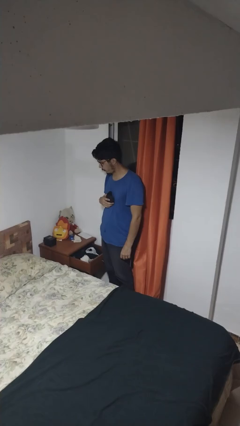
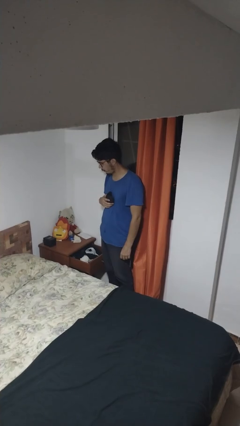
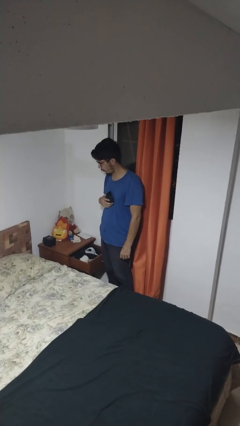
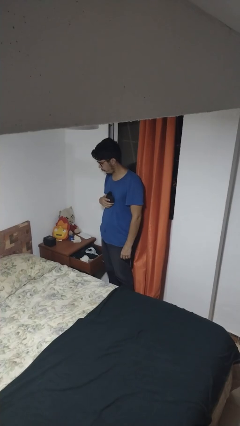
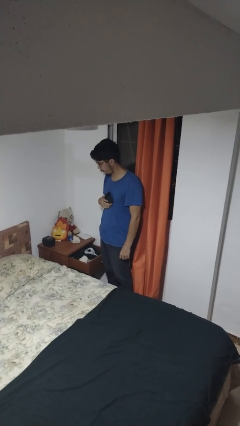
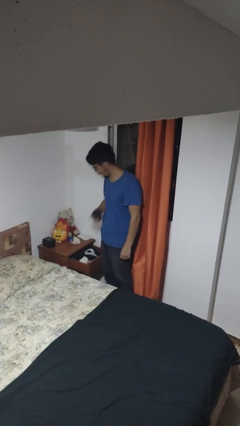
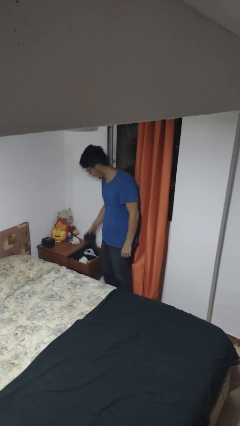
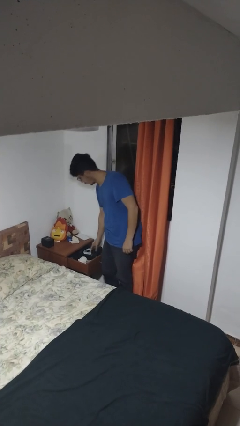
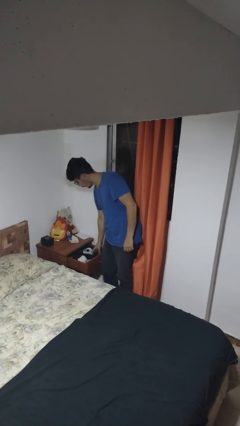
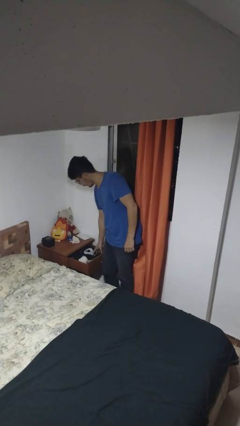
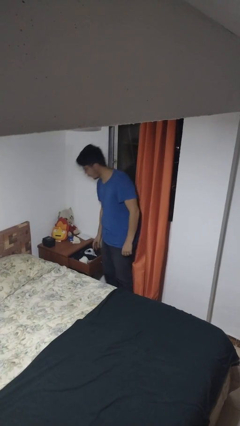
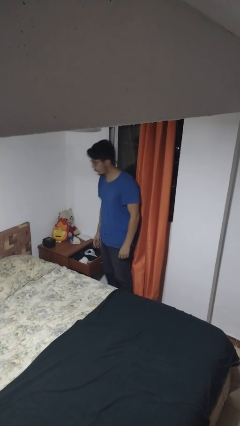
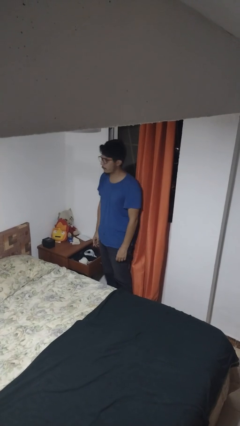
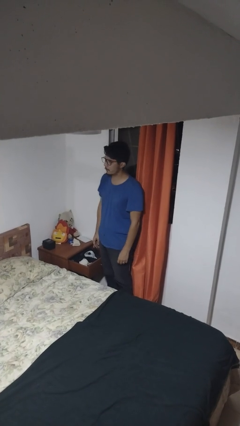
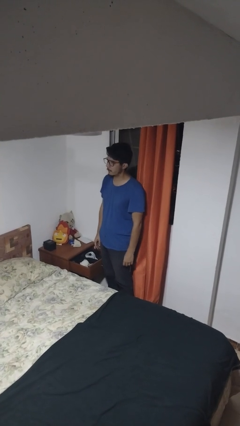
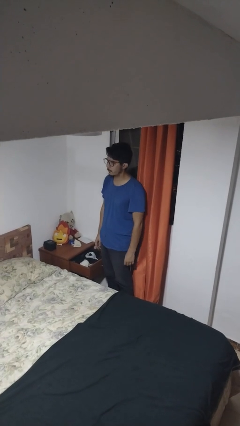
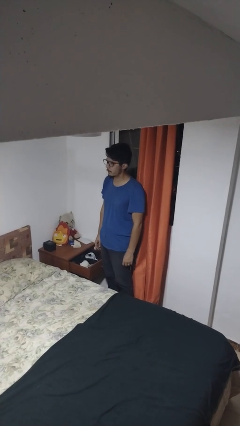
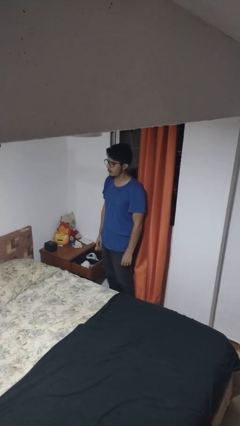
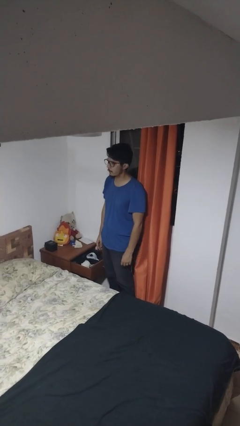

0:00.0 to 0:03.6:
person puts clothes into dresser

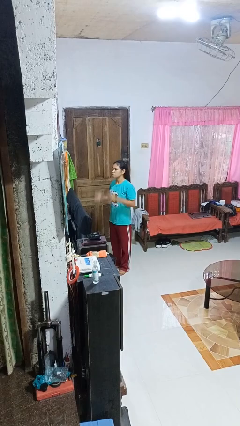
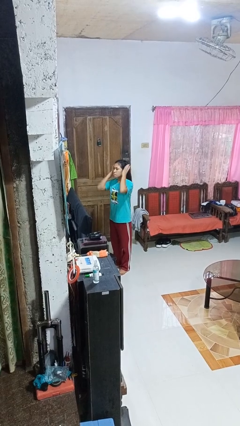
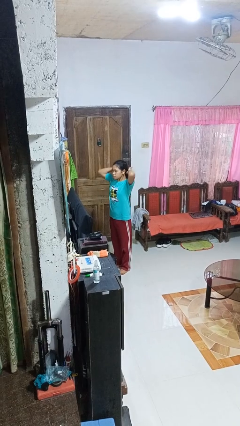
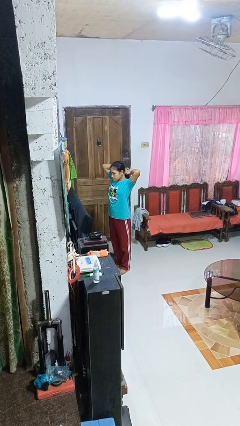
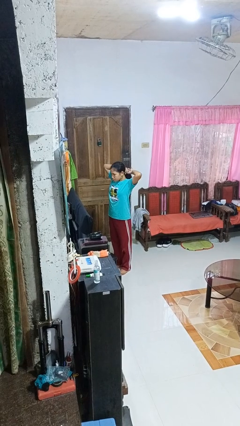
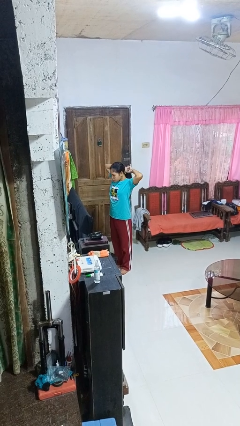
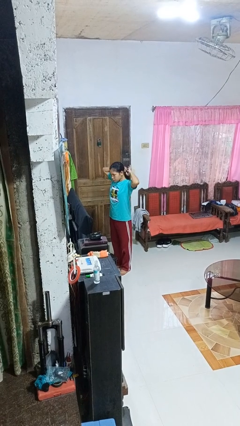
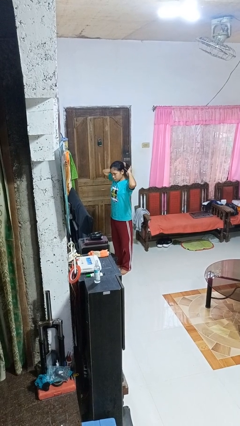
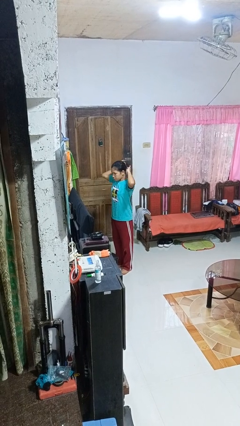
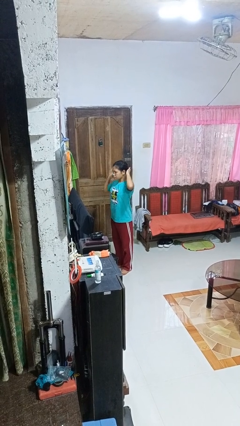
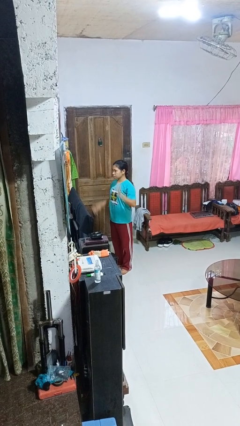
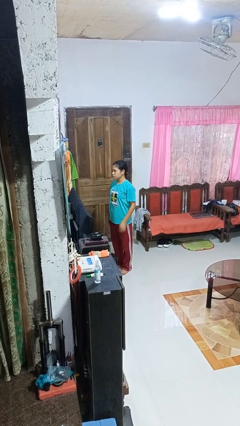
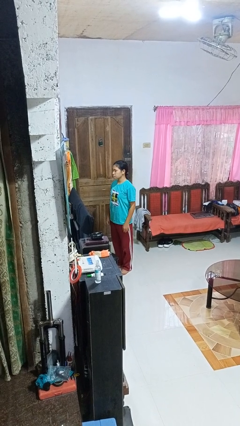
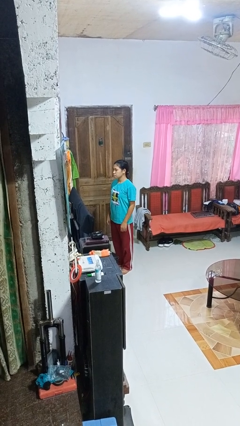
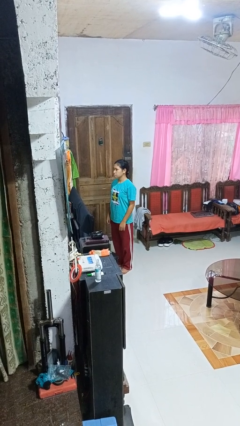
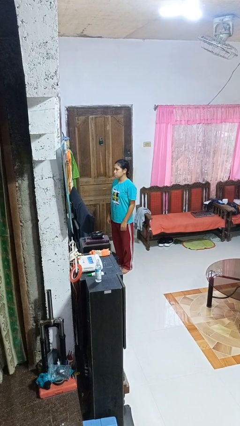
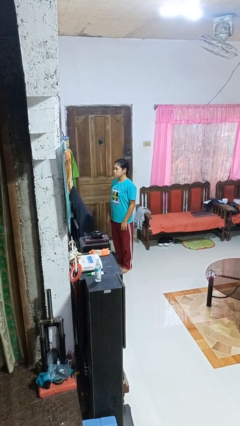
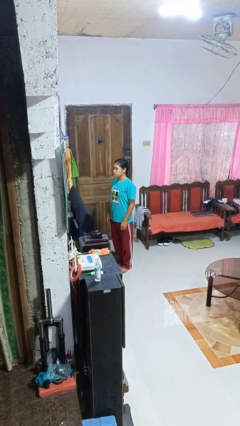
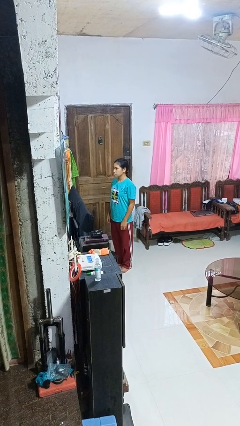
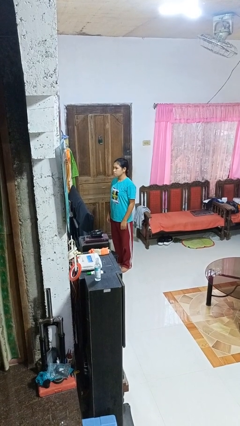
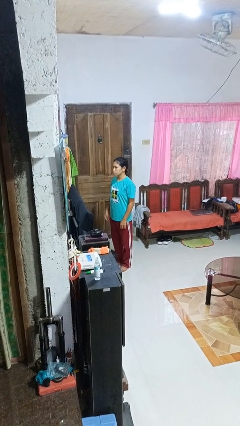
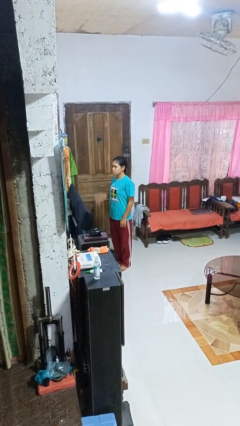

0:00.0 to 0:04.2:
person puts hair in ponytail

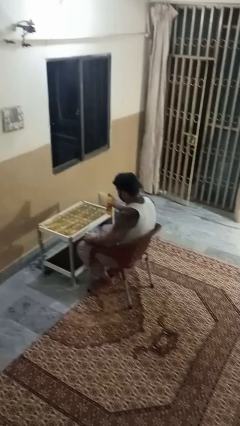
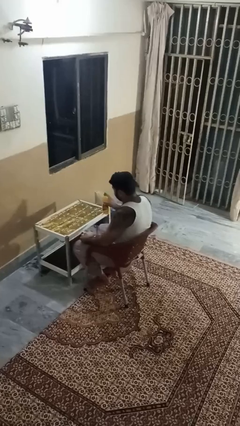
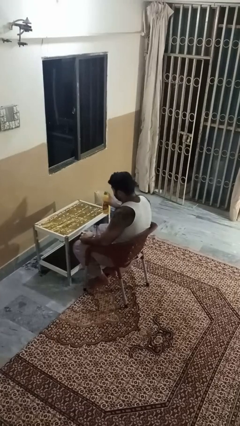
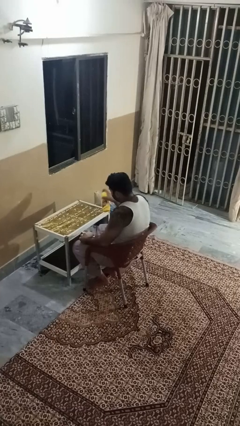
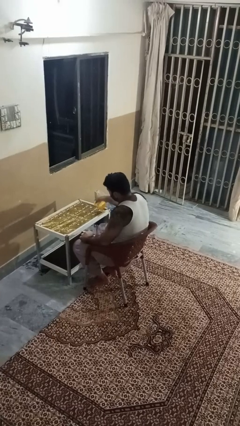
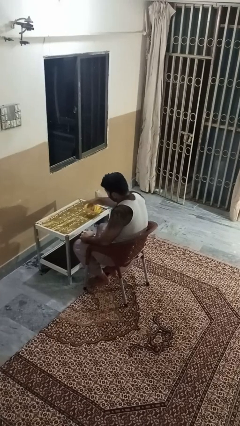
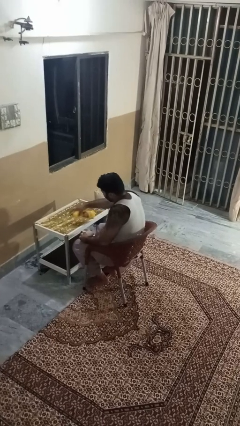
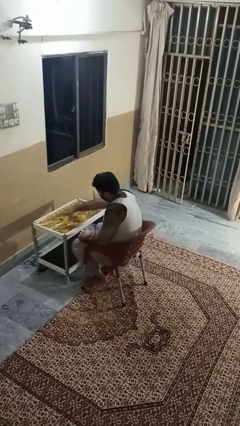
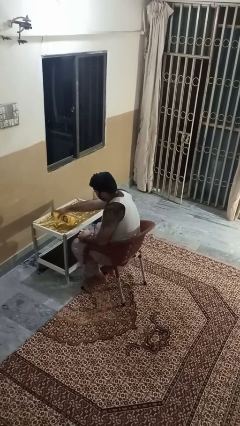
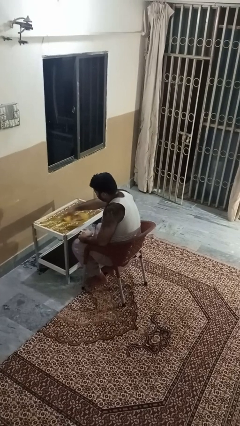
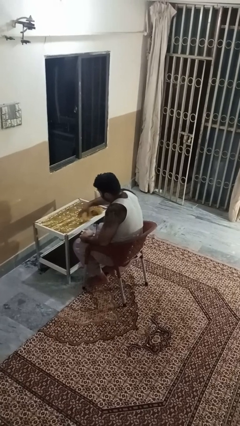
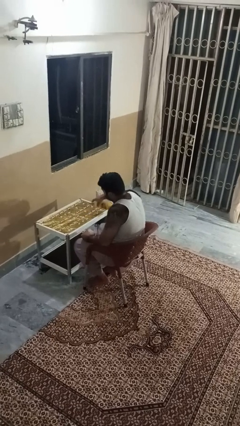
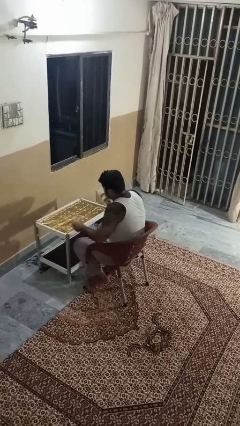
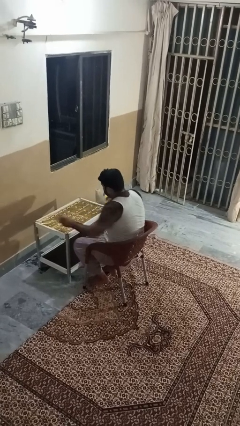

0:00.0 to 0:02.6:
person sprays from bottle

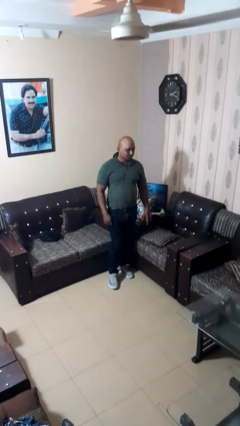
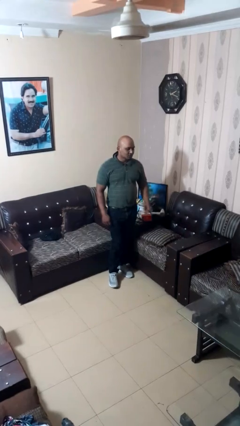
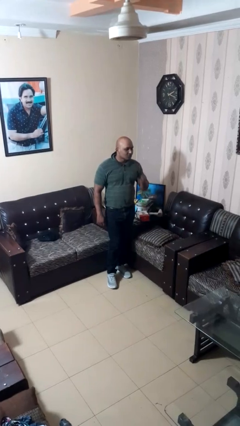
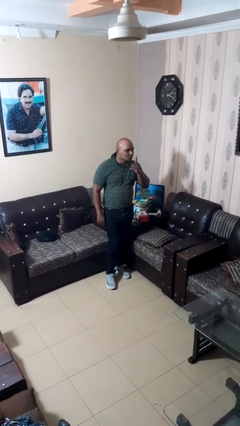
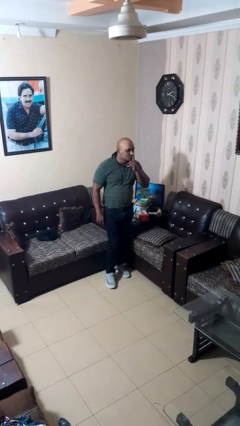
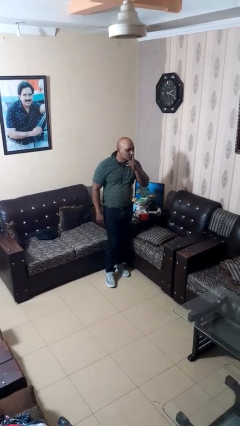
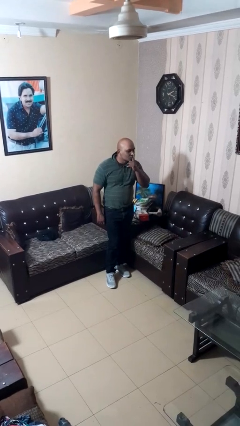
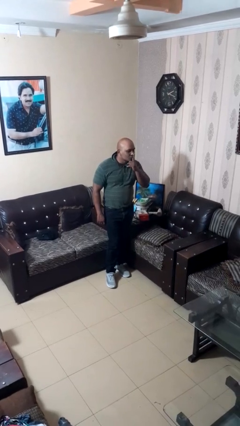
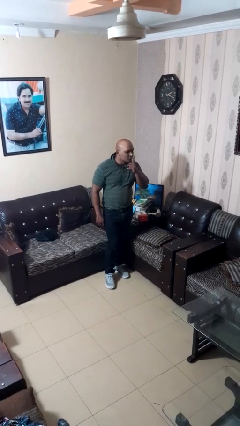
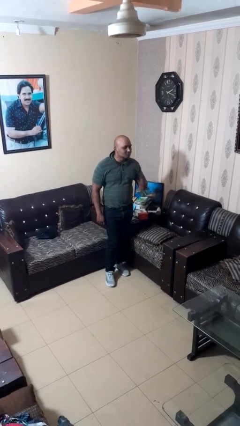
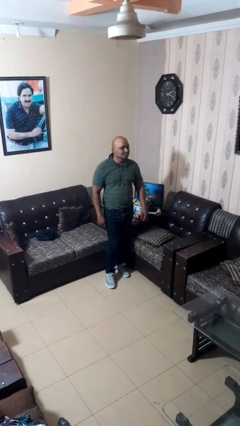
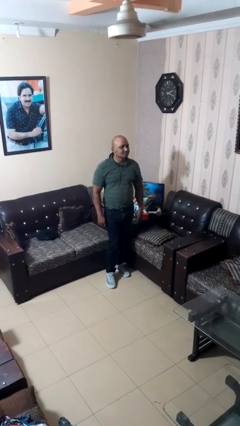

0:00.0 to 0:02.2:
person gestures be quiet

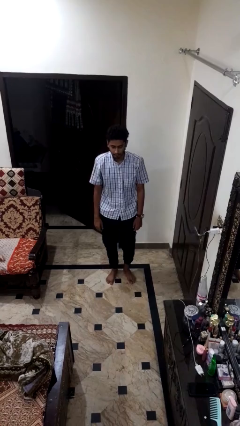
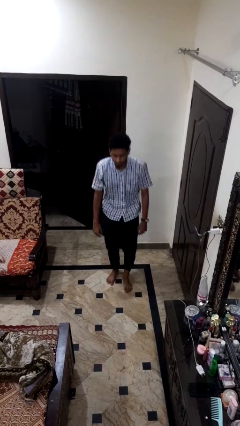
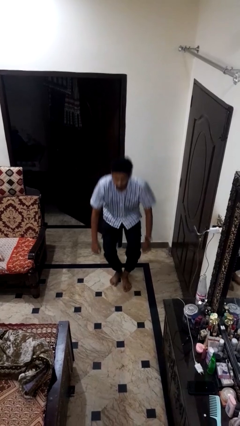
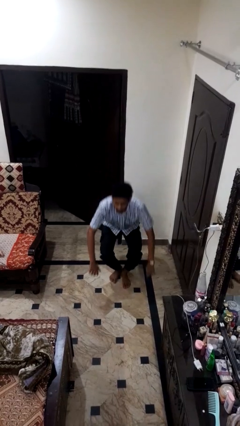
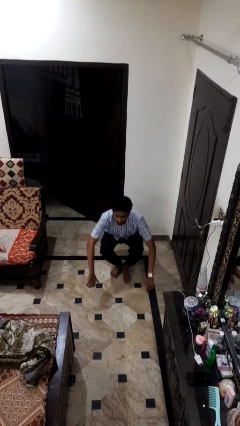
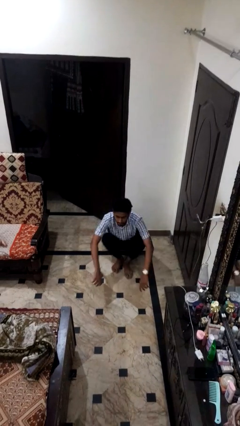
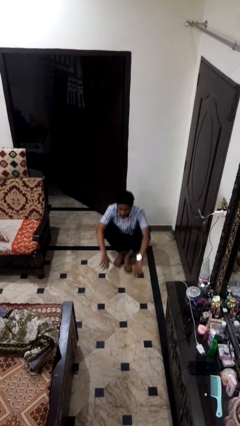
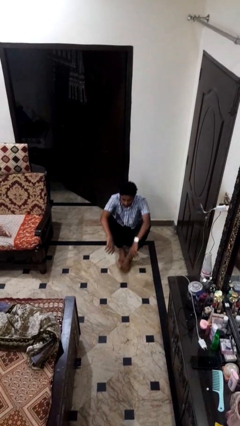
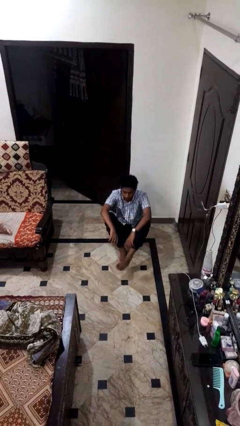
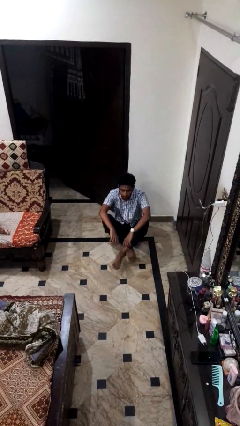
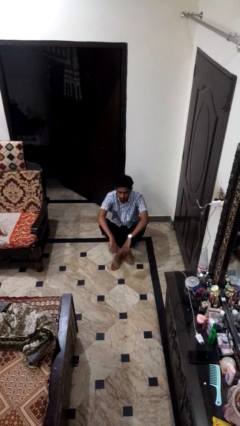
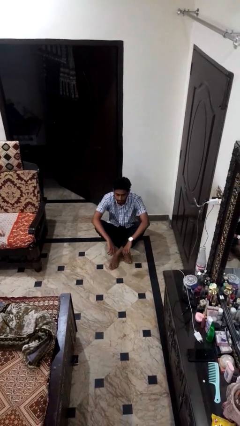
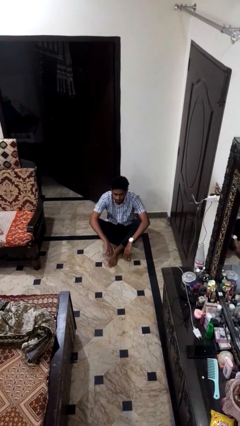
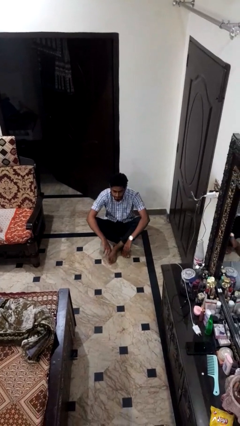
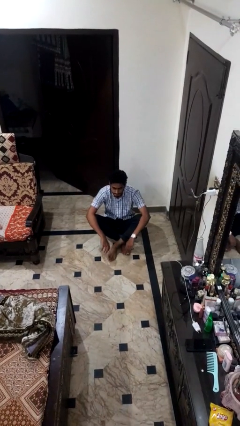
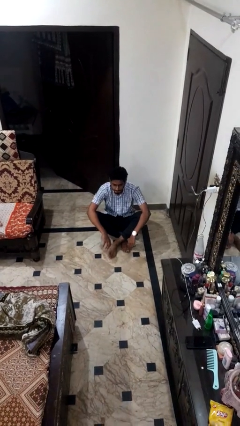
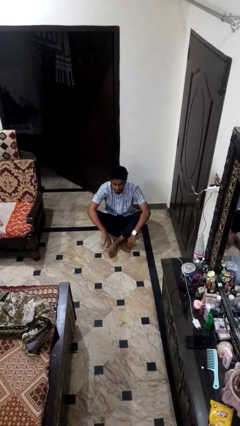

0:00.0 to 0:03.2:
person sits crisscross

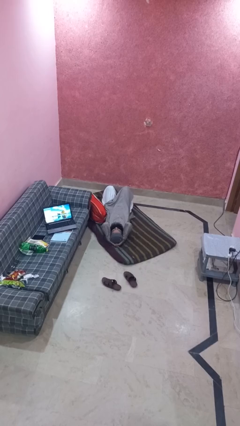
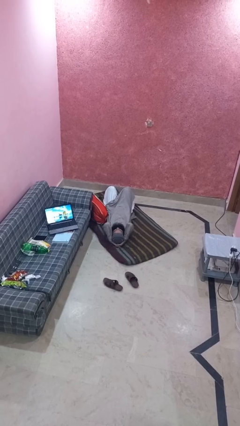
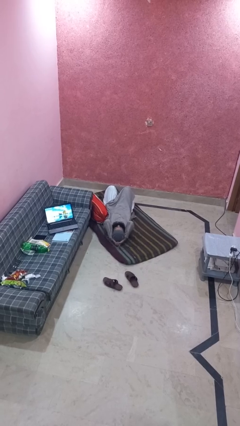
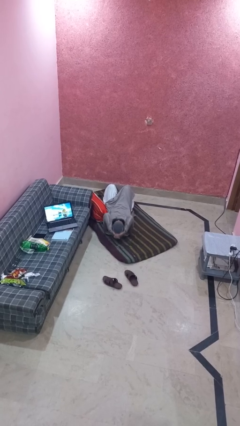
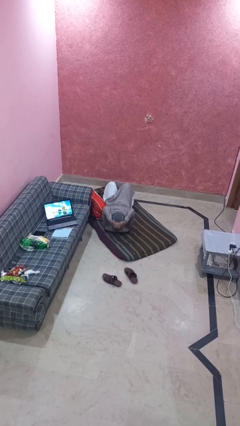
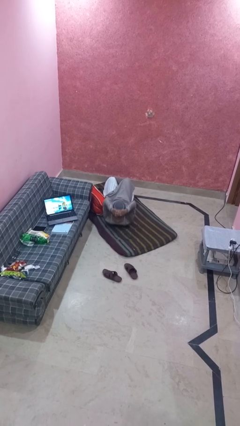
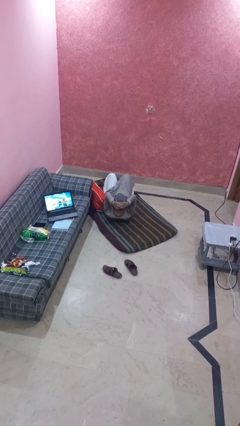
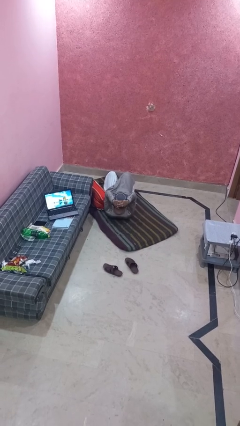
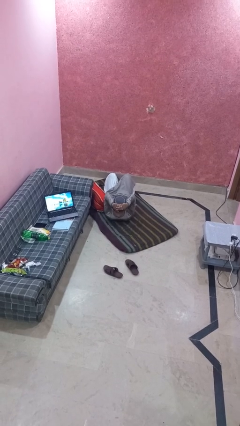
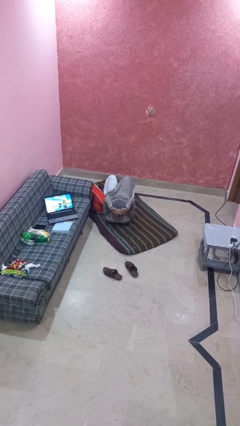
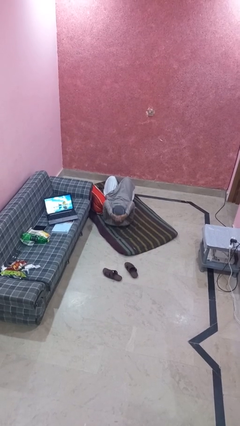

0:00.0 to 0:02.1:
person exercises with situp
